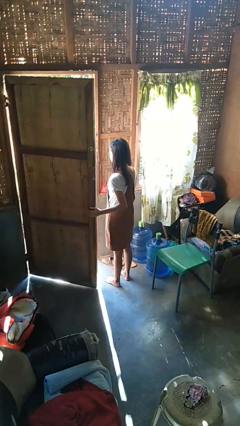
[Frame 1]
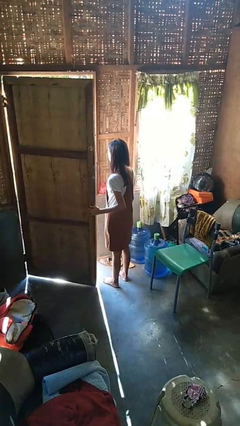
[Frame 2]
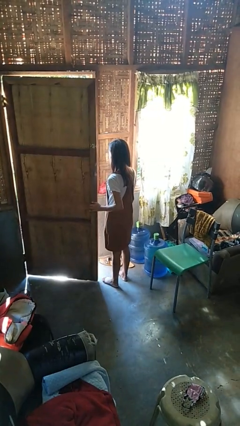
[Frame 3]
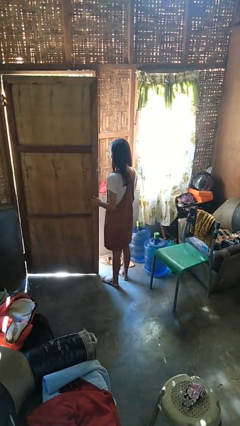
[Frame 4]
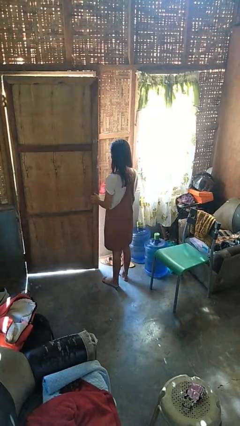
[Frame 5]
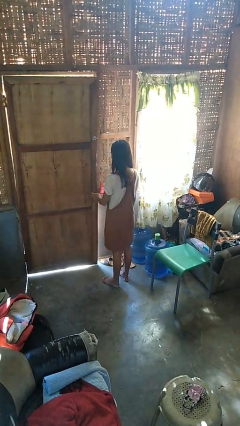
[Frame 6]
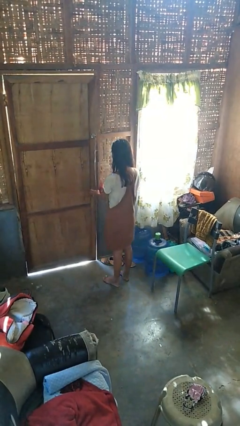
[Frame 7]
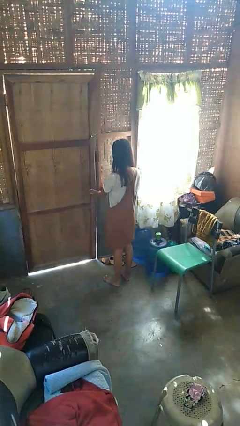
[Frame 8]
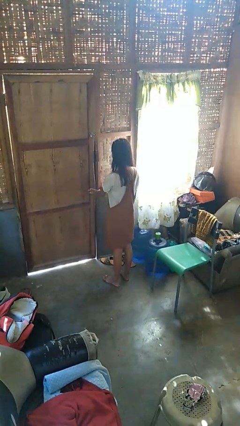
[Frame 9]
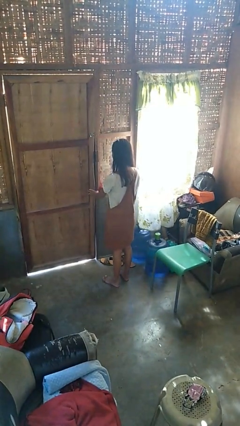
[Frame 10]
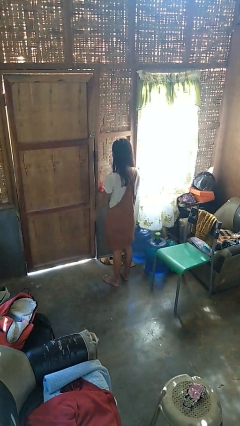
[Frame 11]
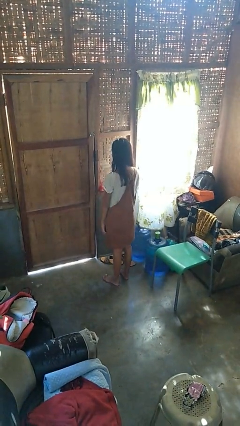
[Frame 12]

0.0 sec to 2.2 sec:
person closes facility door

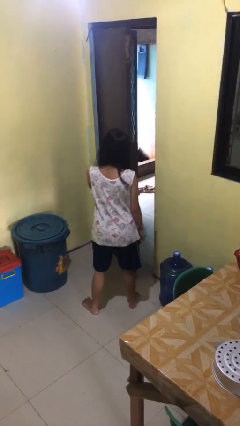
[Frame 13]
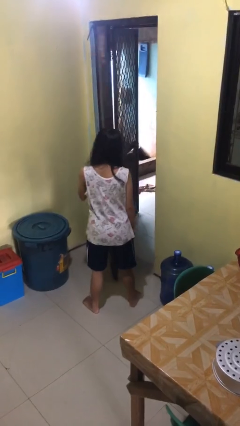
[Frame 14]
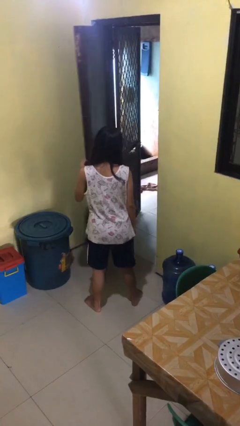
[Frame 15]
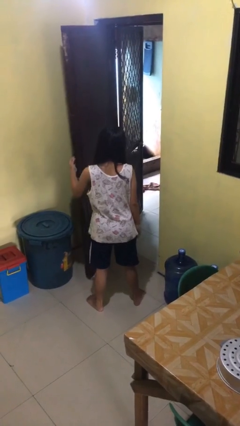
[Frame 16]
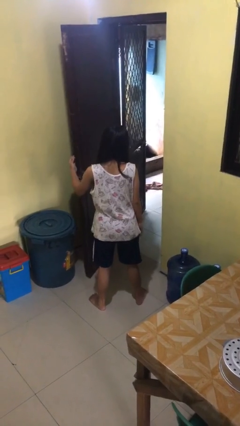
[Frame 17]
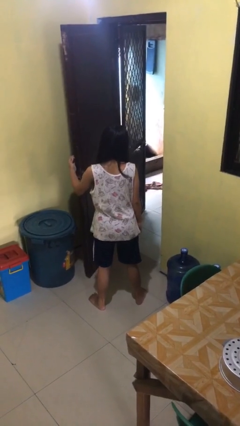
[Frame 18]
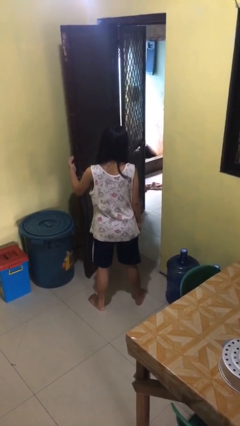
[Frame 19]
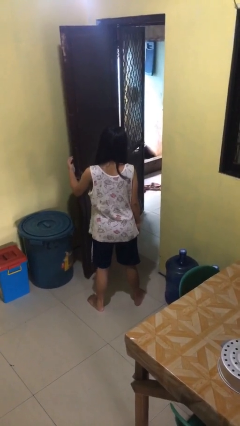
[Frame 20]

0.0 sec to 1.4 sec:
person opens facility door

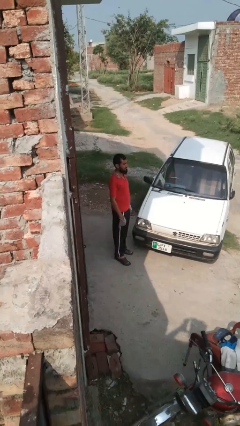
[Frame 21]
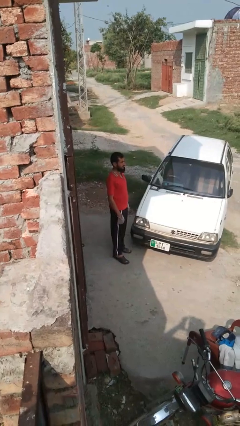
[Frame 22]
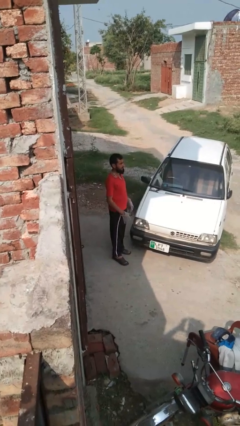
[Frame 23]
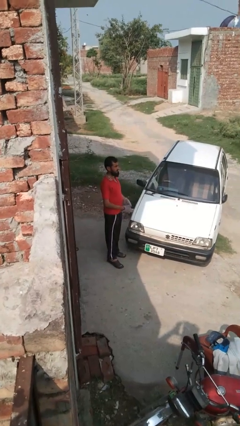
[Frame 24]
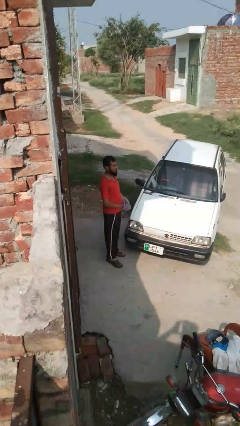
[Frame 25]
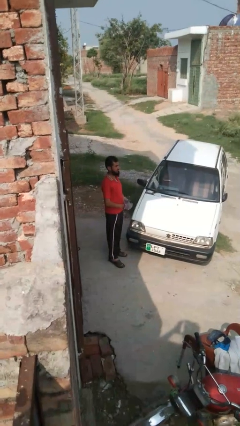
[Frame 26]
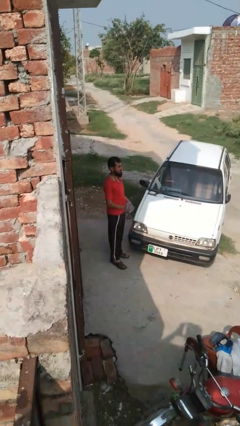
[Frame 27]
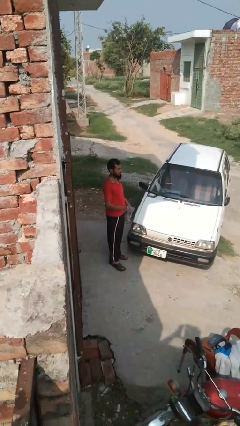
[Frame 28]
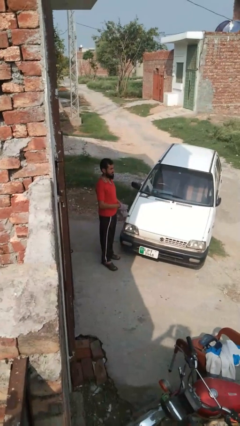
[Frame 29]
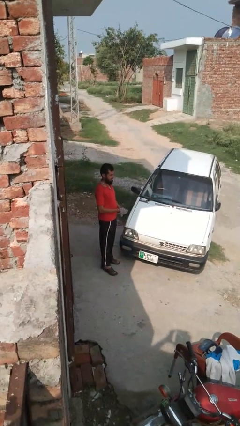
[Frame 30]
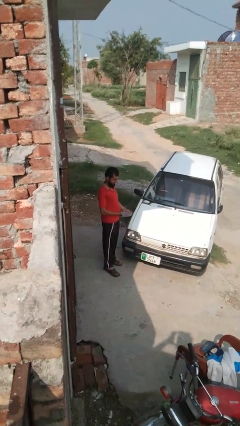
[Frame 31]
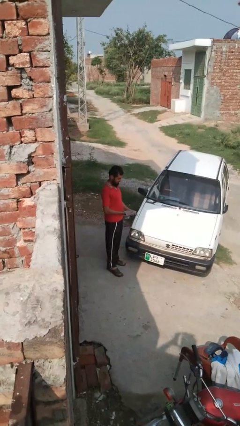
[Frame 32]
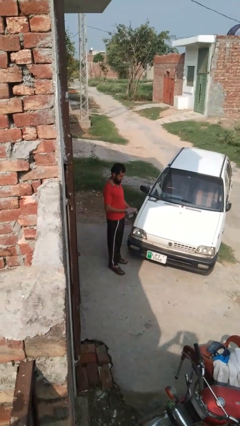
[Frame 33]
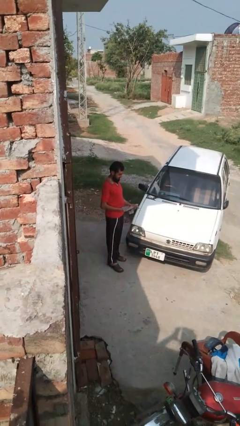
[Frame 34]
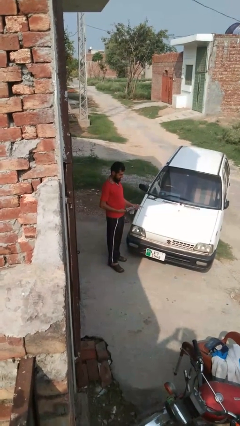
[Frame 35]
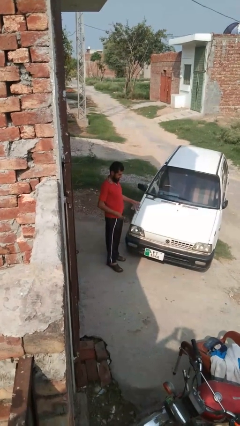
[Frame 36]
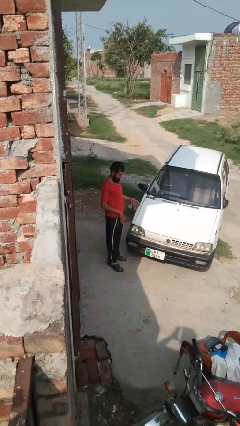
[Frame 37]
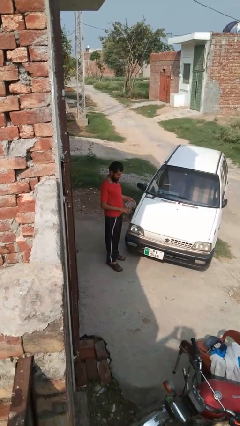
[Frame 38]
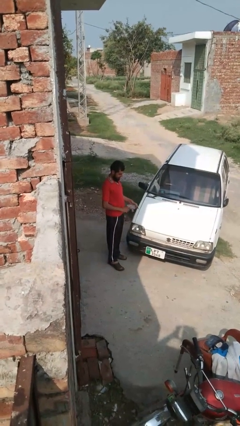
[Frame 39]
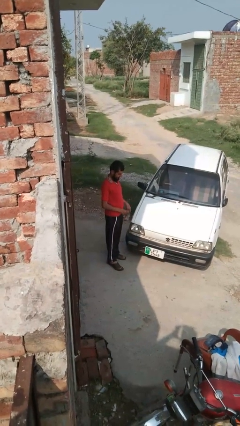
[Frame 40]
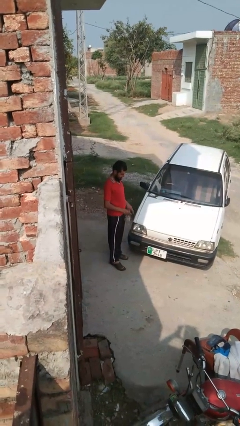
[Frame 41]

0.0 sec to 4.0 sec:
person takes off gloves

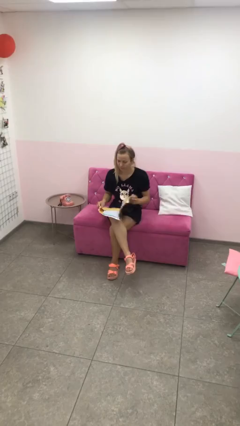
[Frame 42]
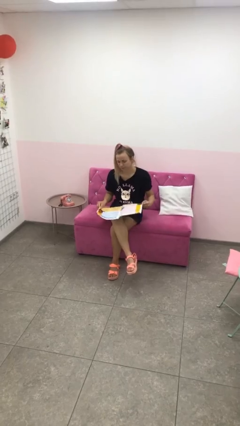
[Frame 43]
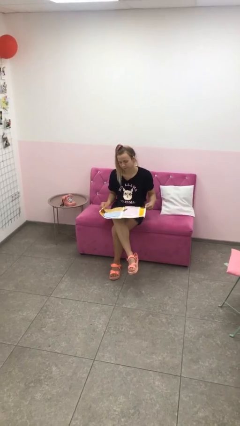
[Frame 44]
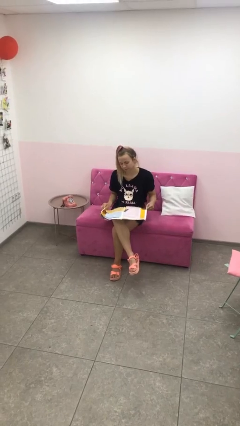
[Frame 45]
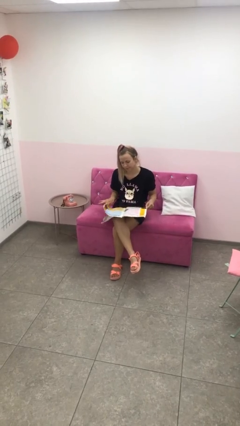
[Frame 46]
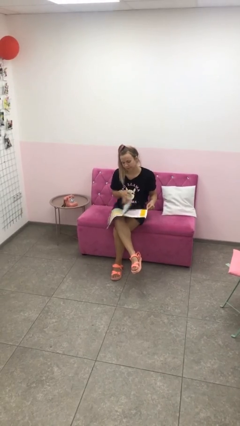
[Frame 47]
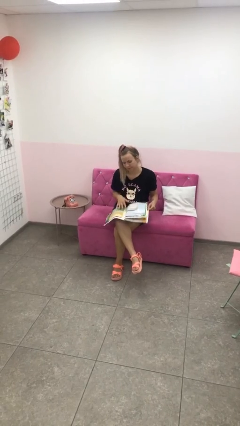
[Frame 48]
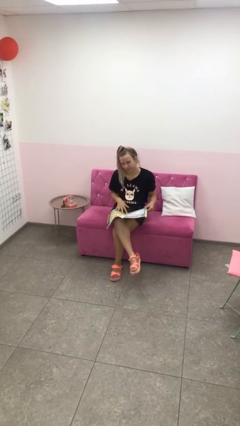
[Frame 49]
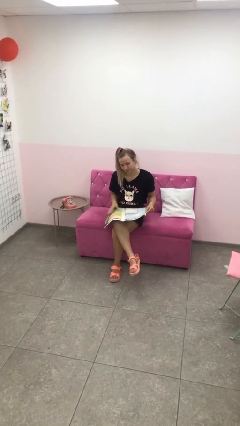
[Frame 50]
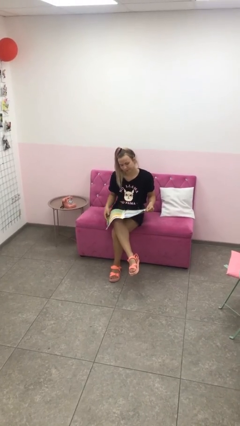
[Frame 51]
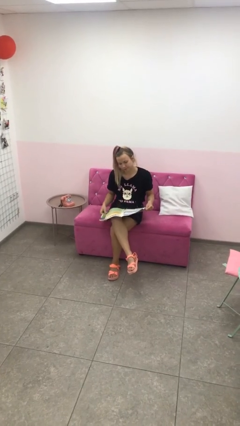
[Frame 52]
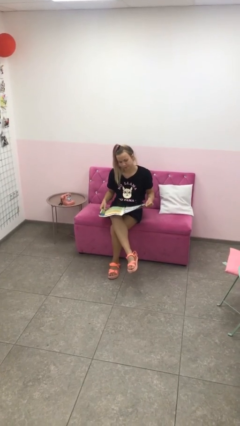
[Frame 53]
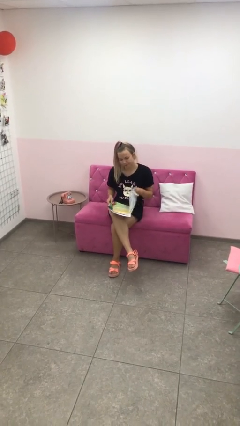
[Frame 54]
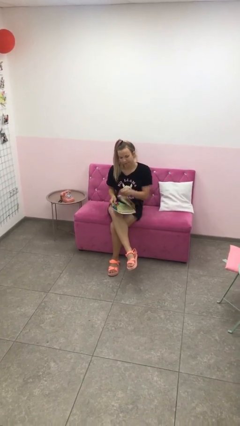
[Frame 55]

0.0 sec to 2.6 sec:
person reads magazine

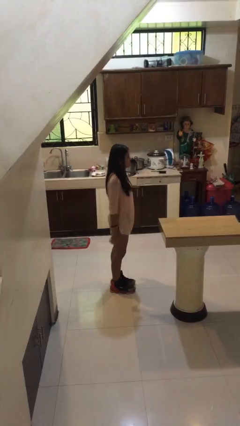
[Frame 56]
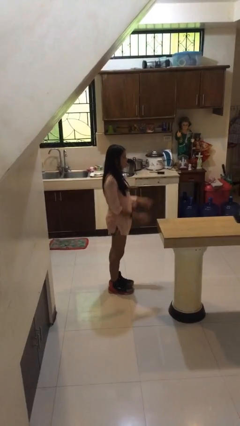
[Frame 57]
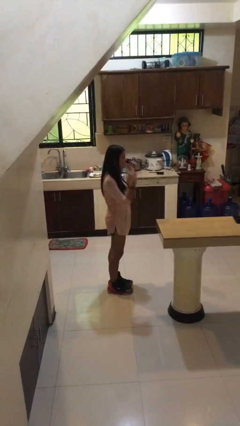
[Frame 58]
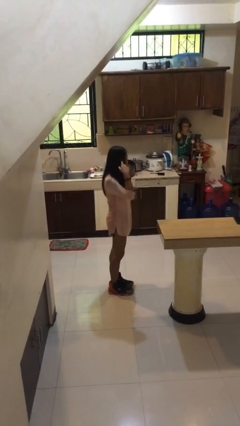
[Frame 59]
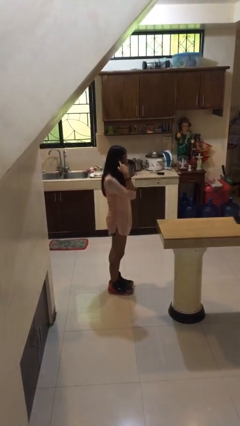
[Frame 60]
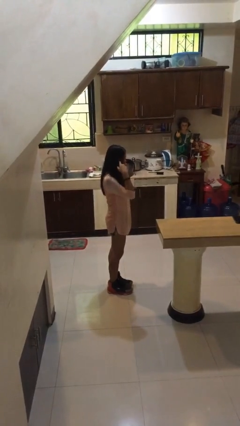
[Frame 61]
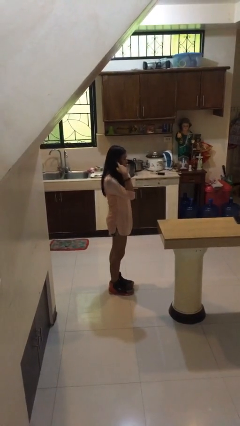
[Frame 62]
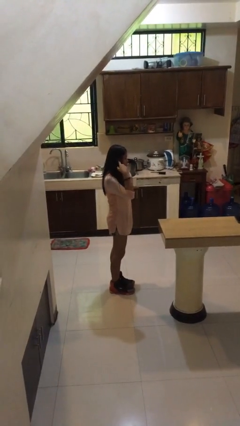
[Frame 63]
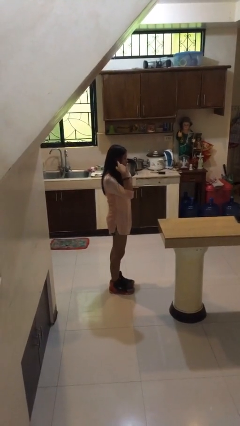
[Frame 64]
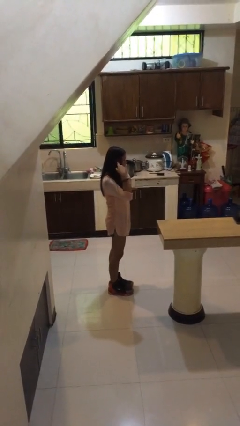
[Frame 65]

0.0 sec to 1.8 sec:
person puts fingers in ear

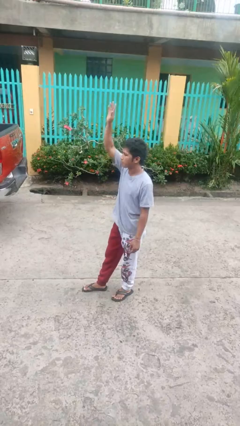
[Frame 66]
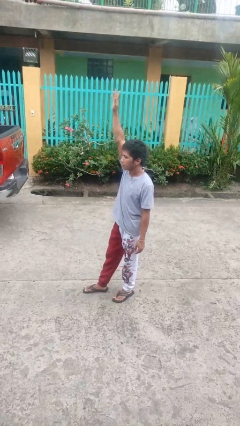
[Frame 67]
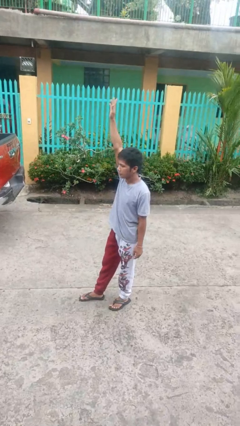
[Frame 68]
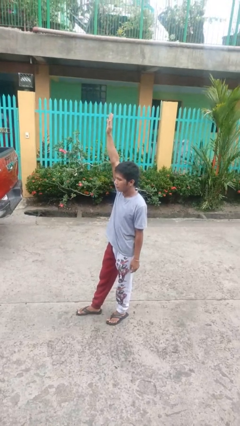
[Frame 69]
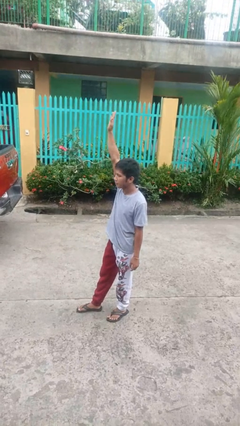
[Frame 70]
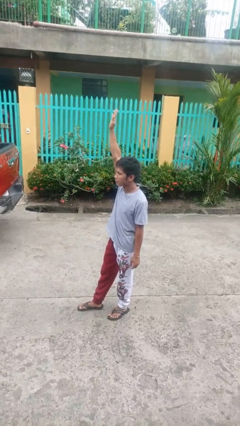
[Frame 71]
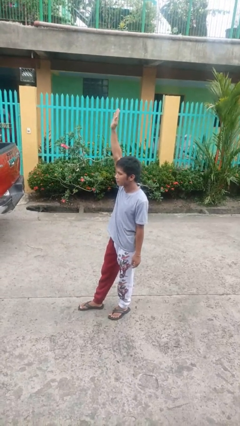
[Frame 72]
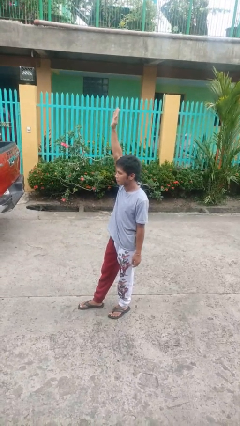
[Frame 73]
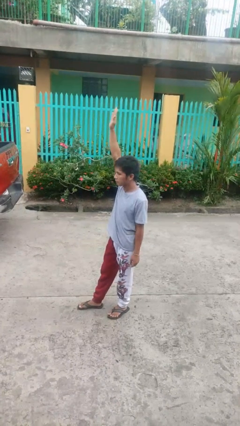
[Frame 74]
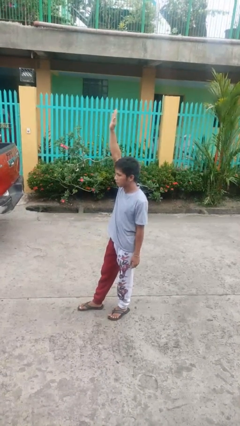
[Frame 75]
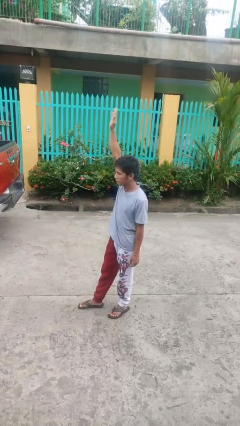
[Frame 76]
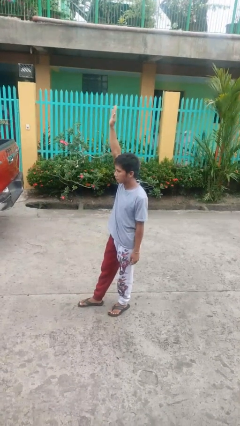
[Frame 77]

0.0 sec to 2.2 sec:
person gestures raise hand

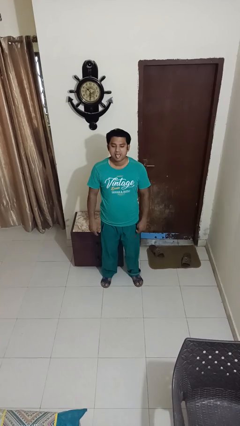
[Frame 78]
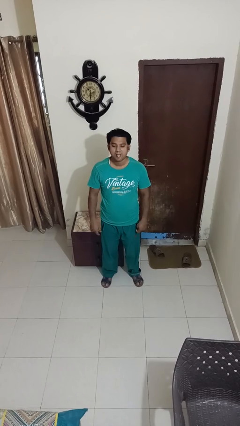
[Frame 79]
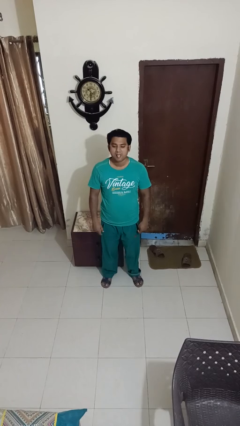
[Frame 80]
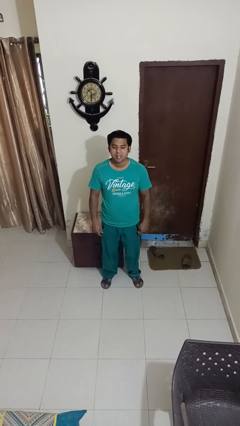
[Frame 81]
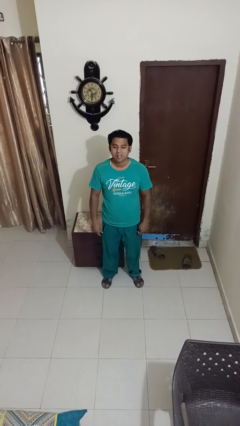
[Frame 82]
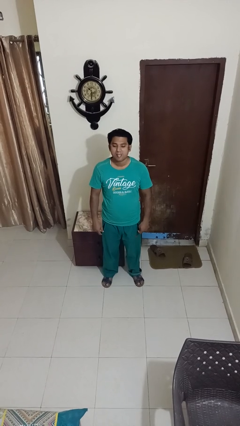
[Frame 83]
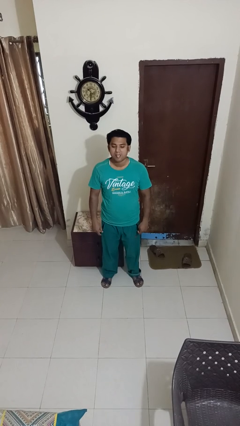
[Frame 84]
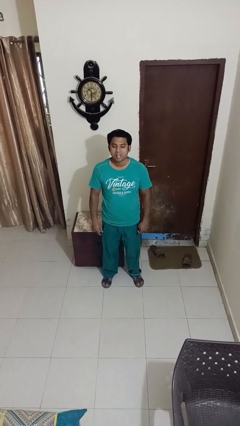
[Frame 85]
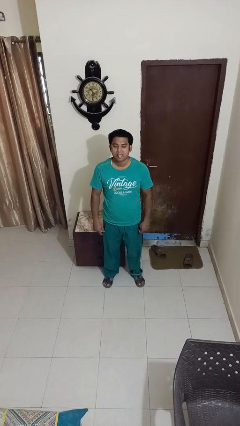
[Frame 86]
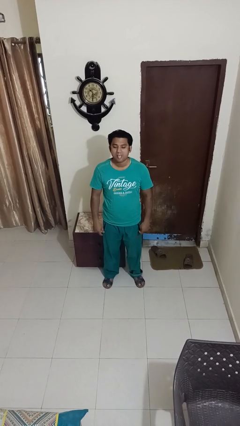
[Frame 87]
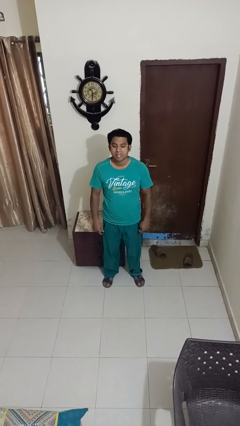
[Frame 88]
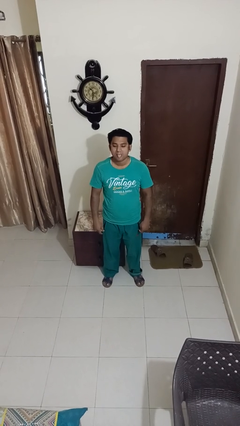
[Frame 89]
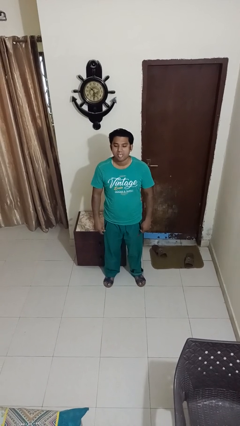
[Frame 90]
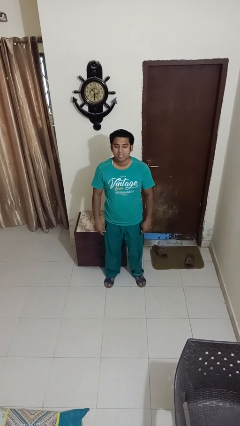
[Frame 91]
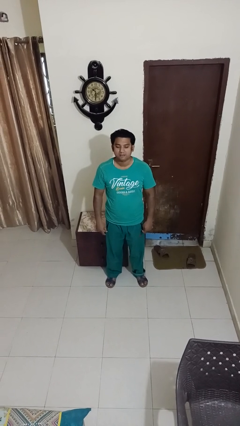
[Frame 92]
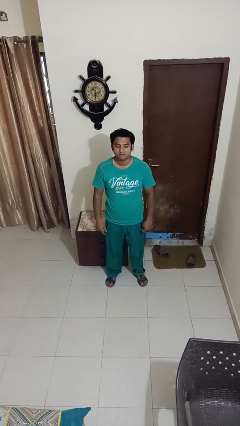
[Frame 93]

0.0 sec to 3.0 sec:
person sticks out tongue
